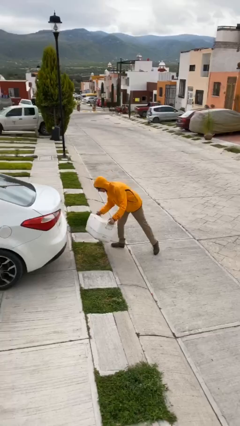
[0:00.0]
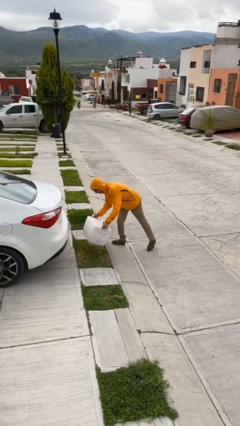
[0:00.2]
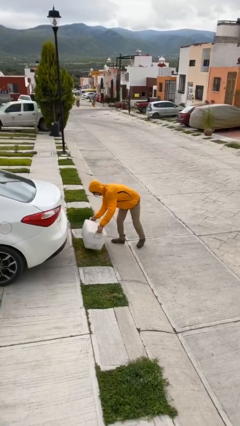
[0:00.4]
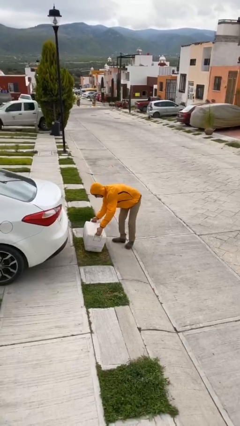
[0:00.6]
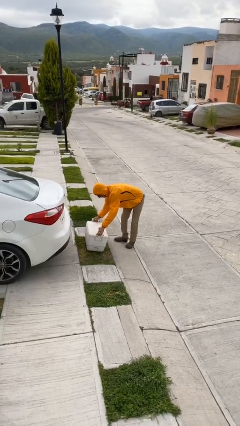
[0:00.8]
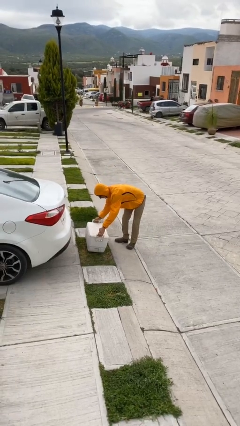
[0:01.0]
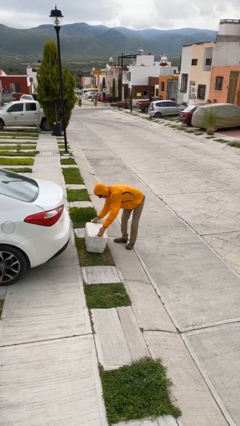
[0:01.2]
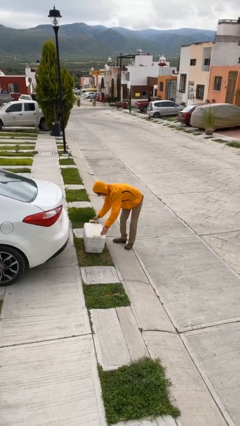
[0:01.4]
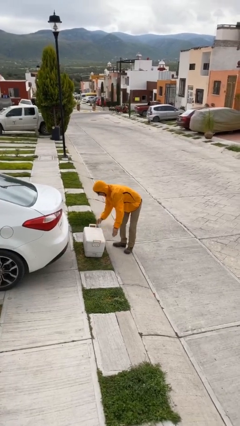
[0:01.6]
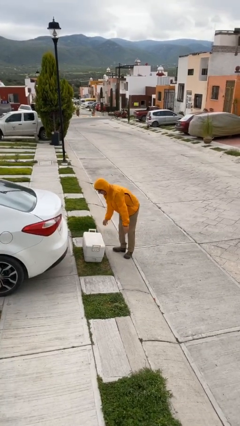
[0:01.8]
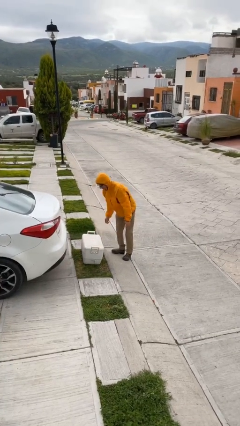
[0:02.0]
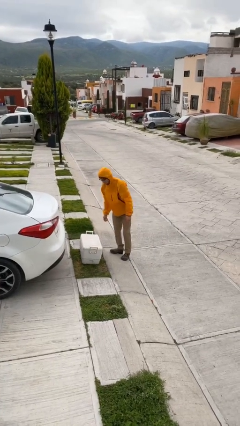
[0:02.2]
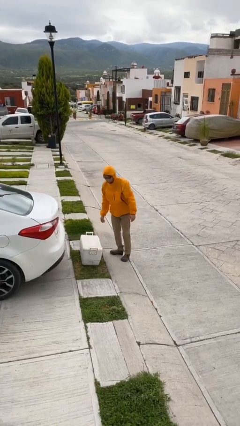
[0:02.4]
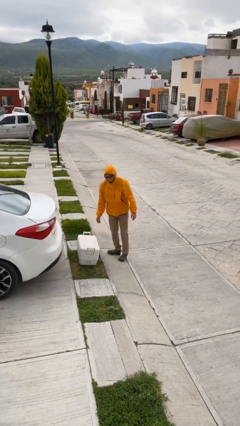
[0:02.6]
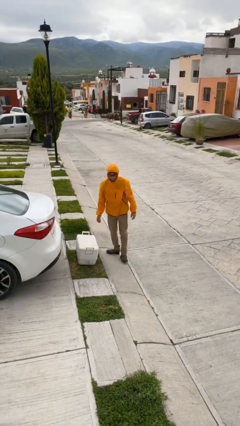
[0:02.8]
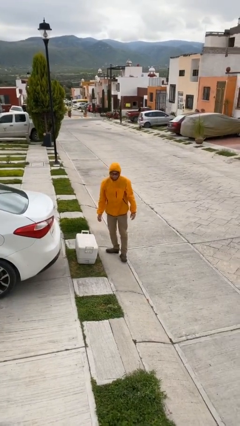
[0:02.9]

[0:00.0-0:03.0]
person puts down object on floor

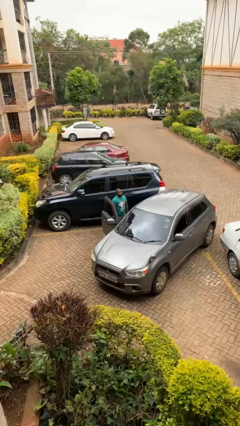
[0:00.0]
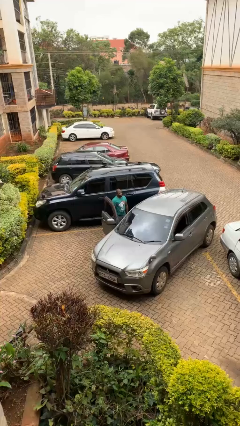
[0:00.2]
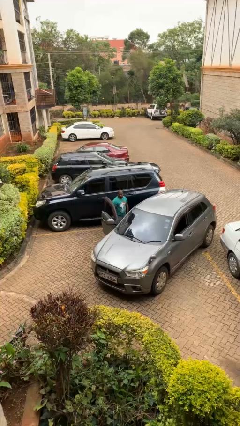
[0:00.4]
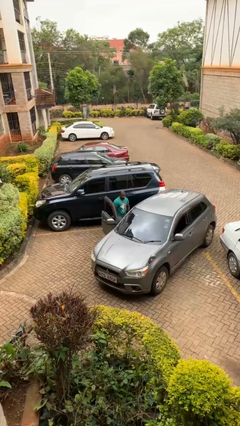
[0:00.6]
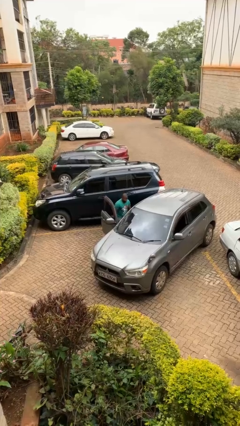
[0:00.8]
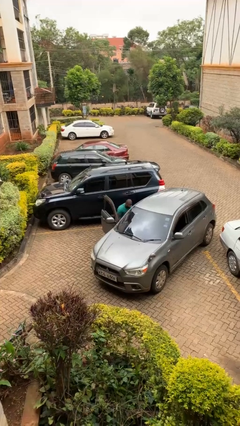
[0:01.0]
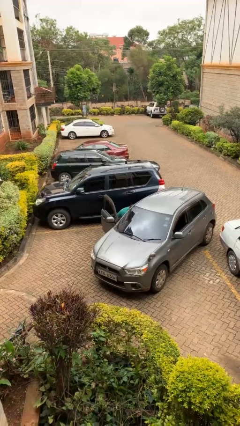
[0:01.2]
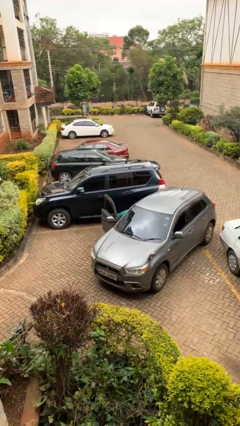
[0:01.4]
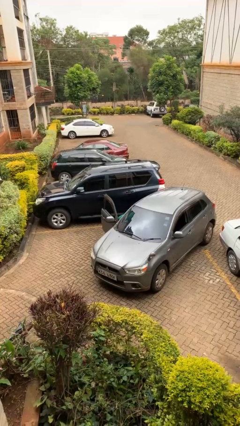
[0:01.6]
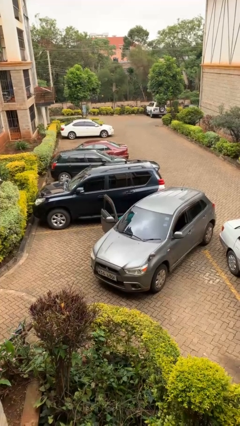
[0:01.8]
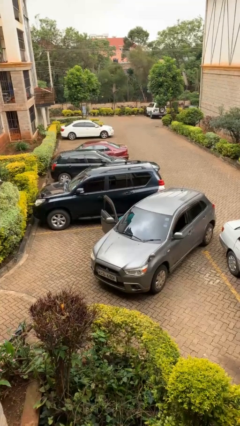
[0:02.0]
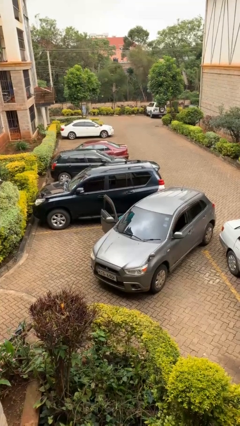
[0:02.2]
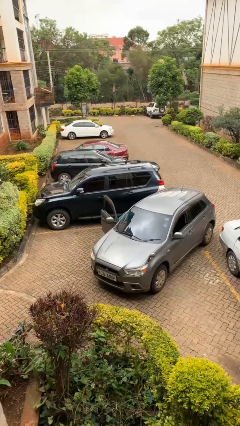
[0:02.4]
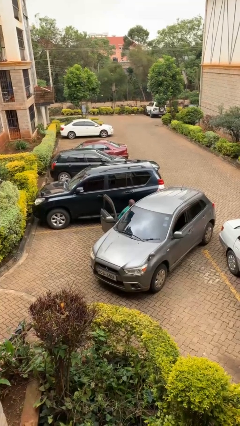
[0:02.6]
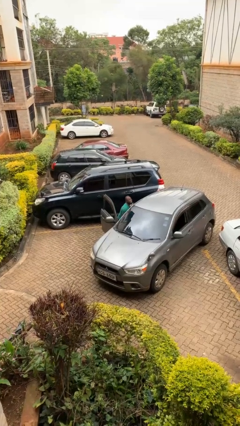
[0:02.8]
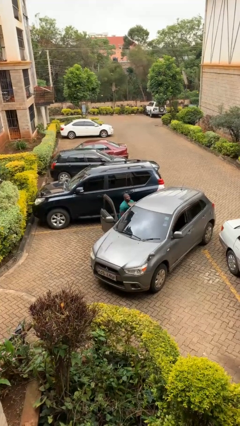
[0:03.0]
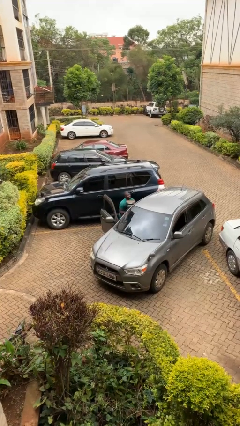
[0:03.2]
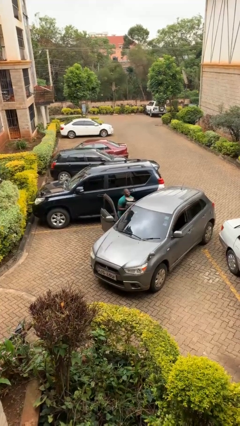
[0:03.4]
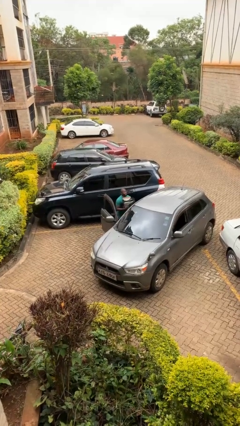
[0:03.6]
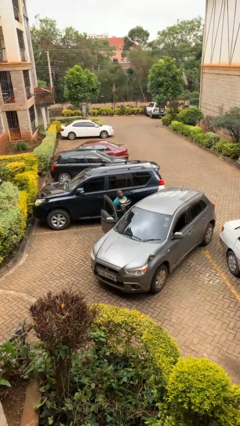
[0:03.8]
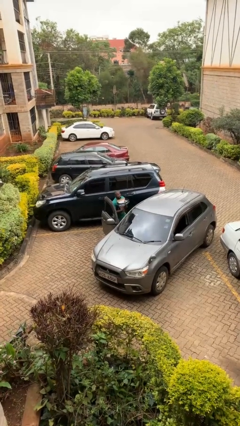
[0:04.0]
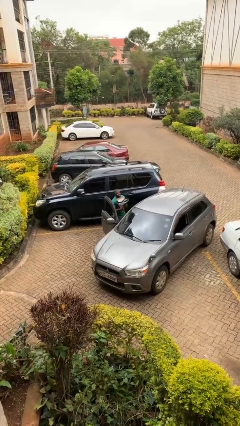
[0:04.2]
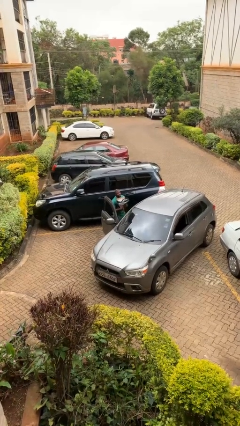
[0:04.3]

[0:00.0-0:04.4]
person unloads car

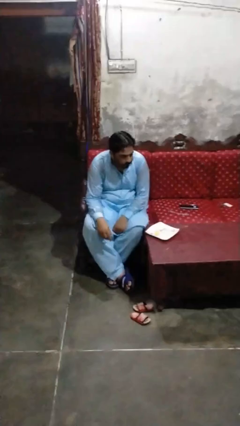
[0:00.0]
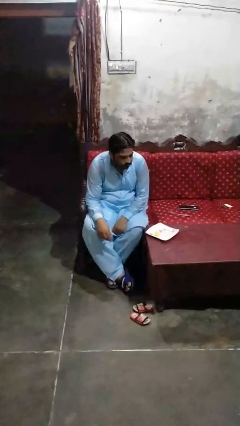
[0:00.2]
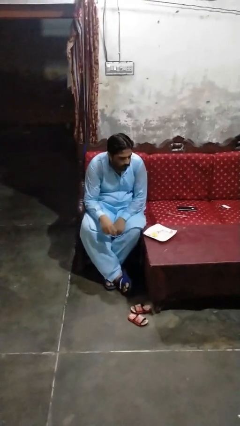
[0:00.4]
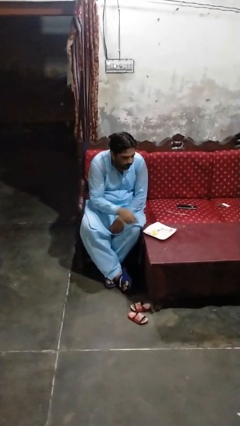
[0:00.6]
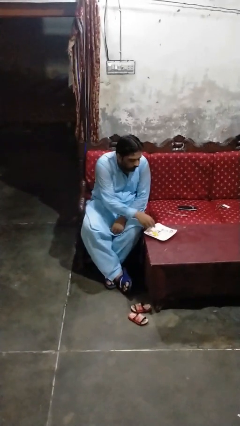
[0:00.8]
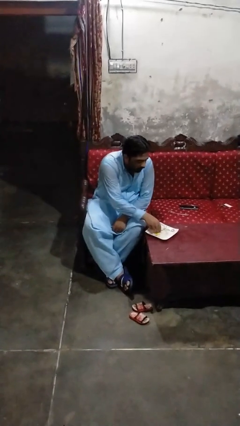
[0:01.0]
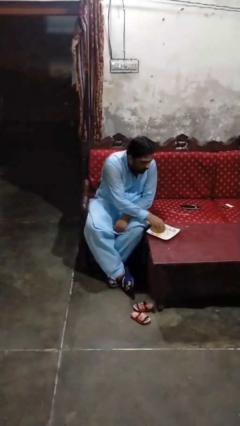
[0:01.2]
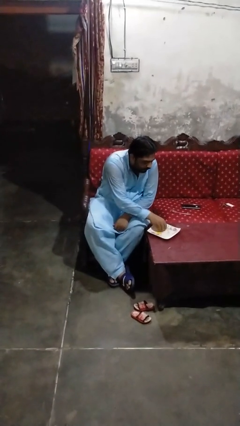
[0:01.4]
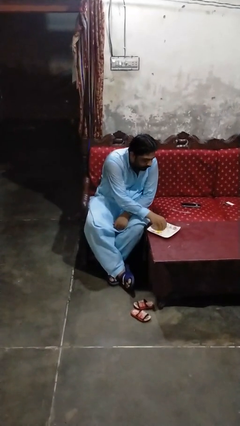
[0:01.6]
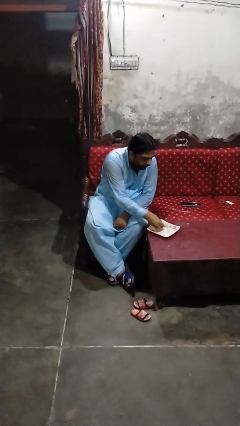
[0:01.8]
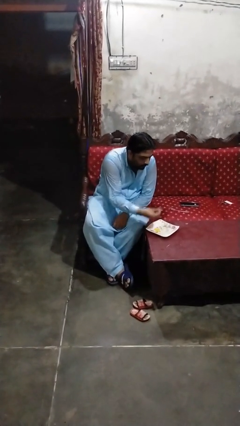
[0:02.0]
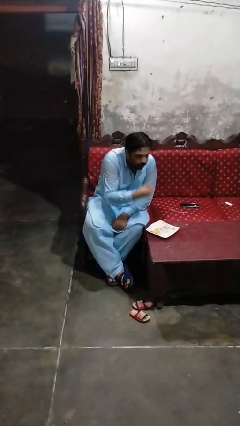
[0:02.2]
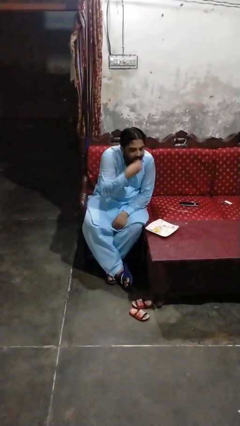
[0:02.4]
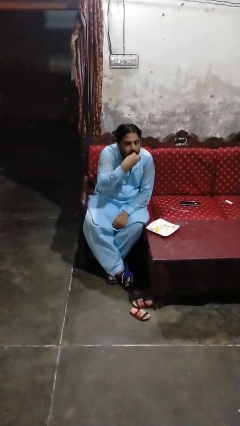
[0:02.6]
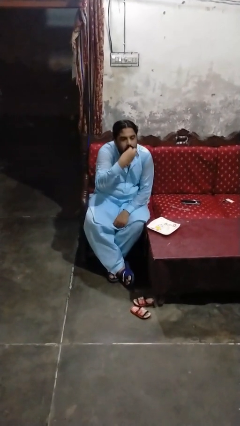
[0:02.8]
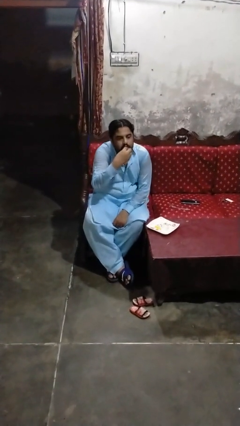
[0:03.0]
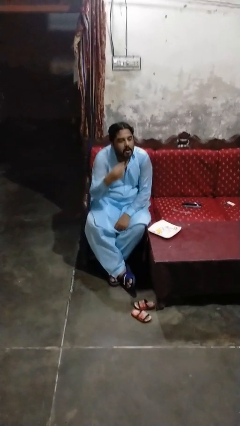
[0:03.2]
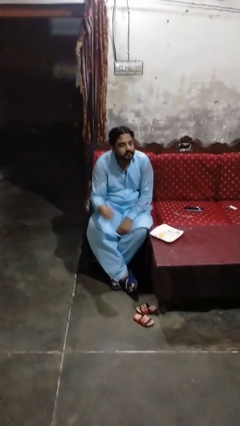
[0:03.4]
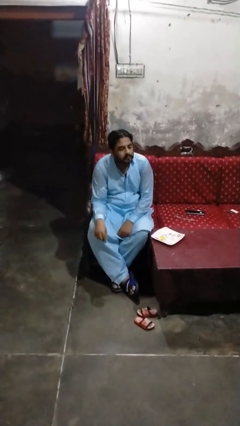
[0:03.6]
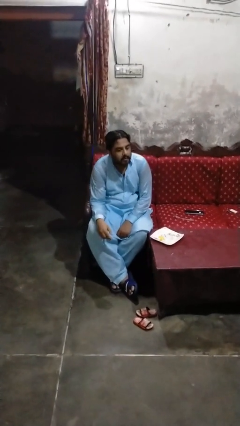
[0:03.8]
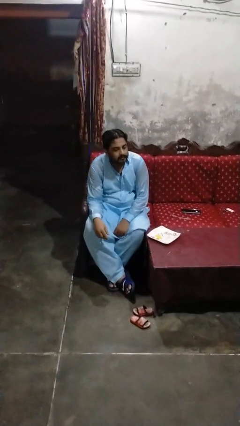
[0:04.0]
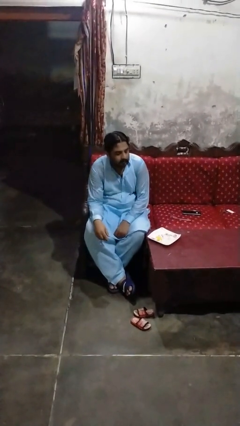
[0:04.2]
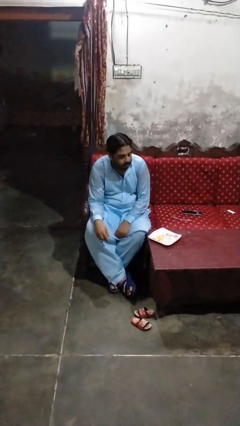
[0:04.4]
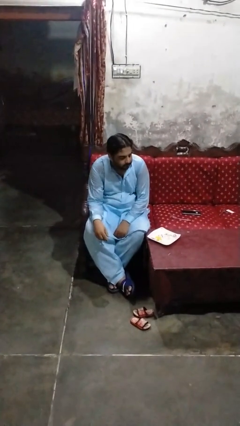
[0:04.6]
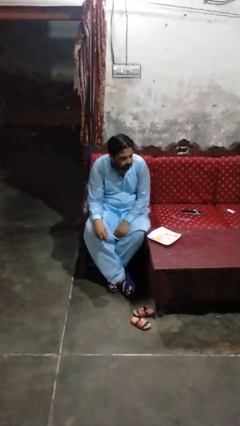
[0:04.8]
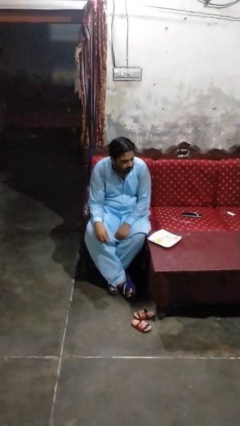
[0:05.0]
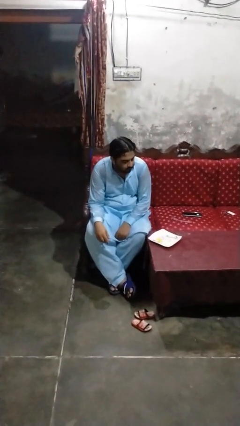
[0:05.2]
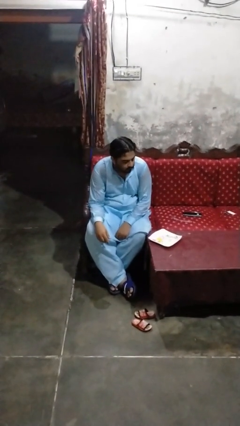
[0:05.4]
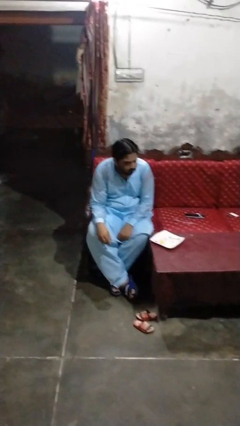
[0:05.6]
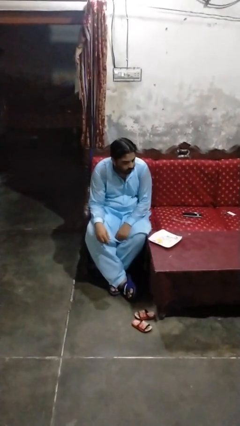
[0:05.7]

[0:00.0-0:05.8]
person eats with hands

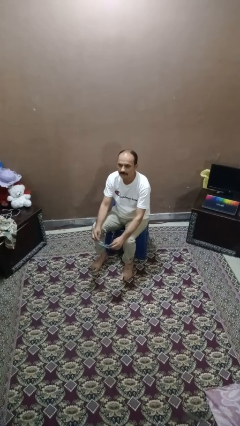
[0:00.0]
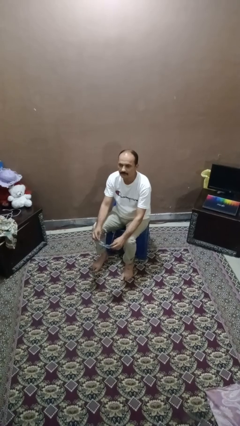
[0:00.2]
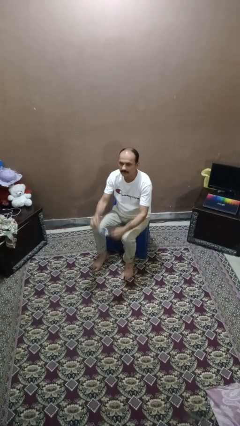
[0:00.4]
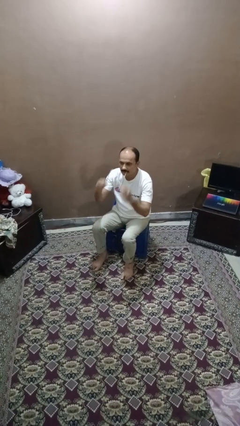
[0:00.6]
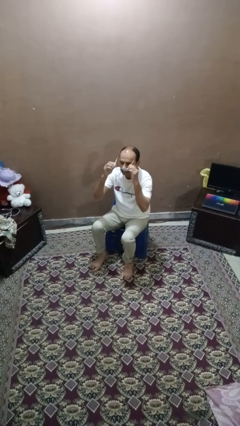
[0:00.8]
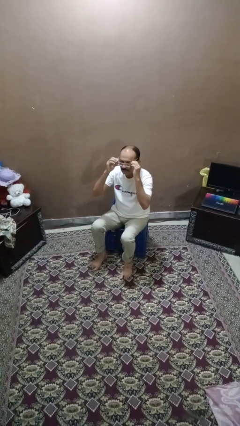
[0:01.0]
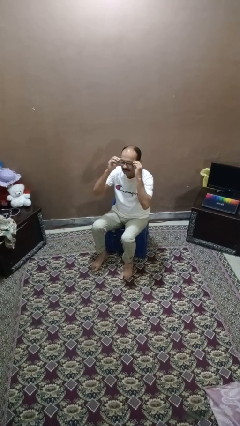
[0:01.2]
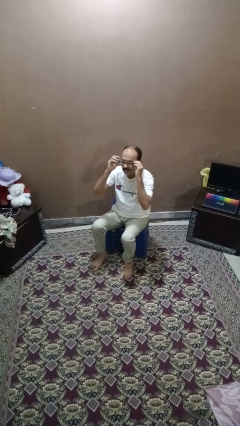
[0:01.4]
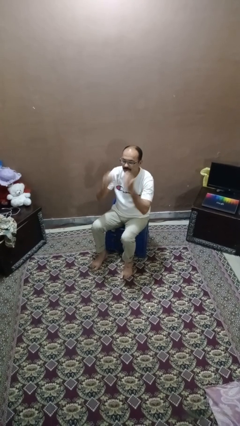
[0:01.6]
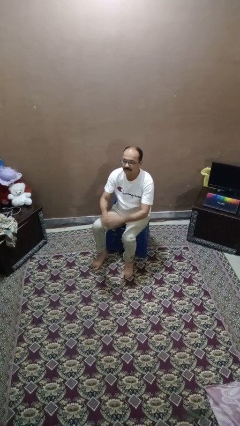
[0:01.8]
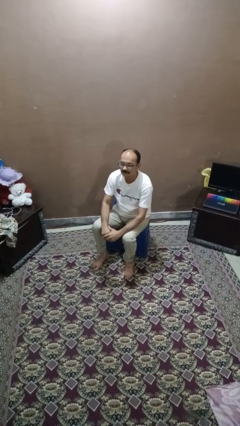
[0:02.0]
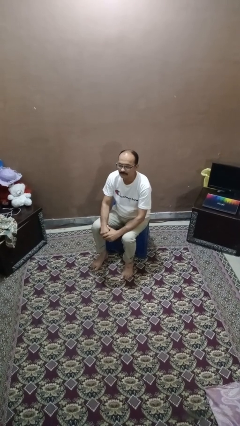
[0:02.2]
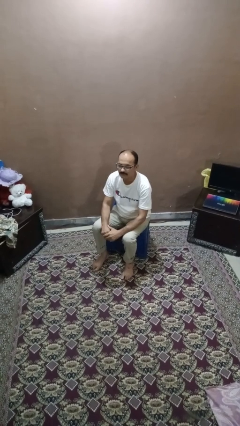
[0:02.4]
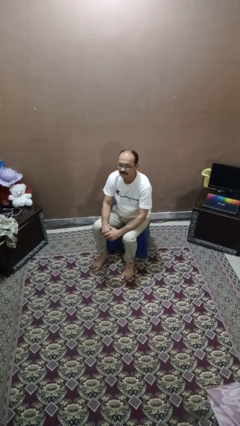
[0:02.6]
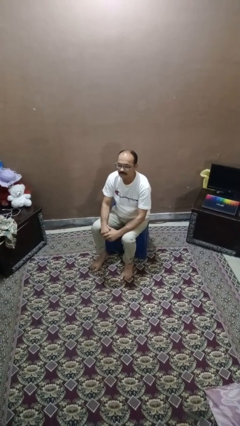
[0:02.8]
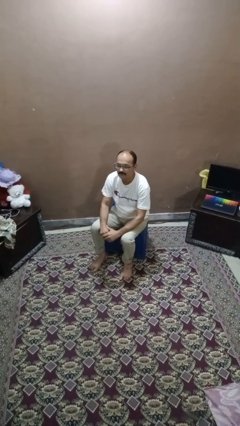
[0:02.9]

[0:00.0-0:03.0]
person puts on glasses

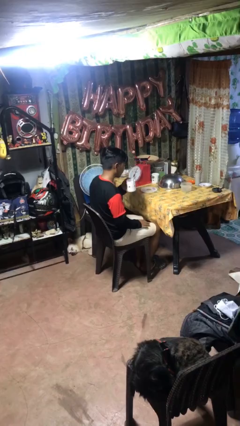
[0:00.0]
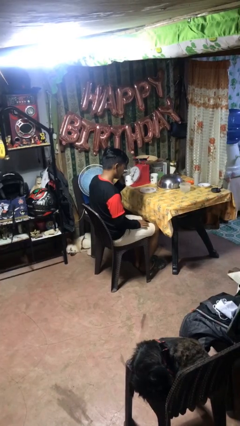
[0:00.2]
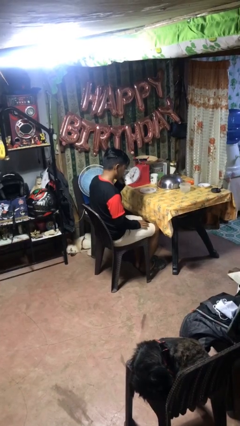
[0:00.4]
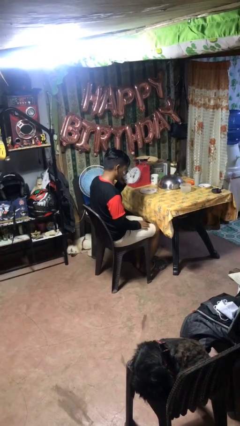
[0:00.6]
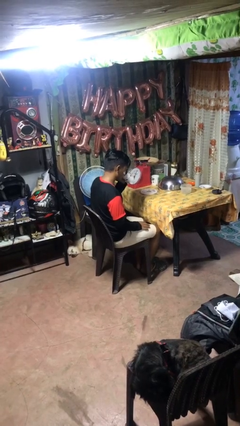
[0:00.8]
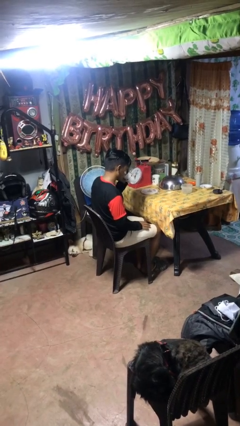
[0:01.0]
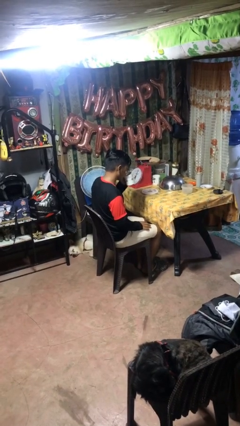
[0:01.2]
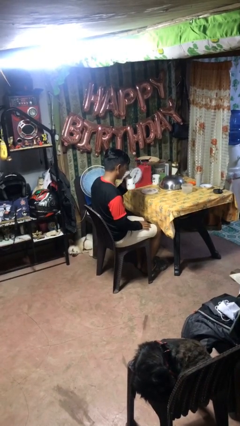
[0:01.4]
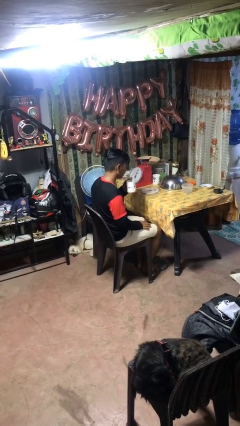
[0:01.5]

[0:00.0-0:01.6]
person drinks from mug
